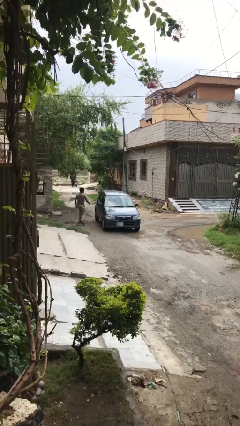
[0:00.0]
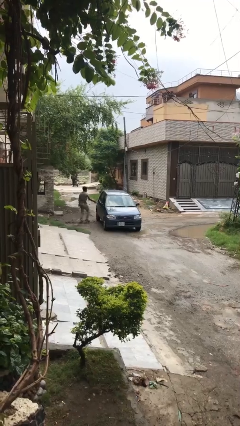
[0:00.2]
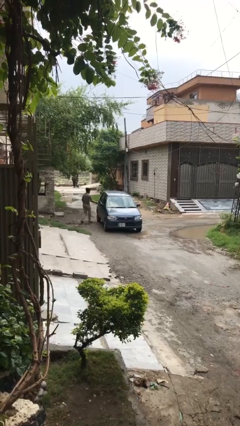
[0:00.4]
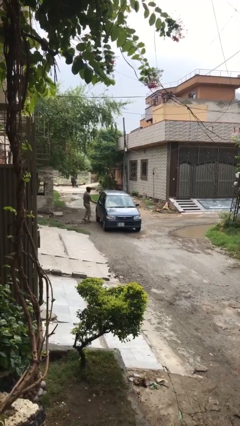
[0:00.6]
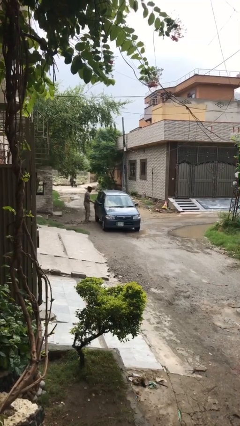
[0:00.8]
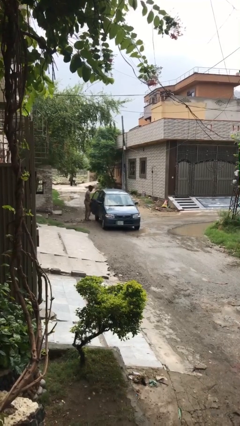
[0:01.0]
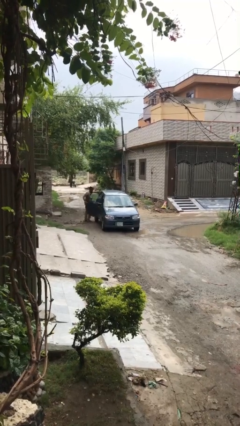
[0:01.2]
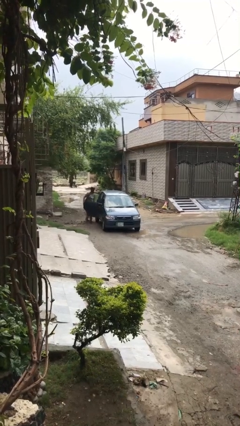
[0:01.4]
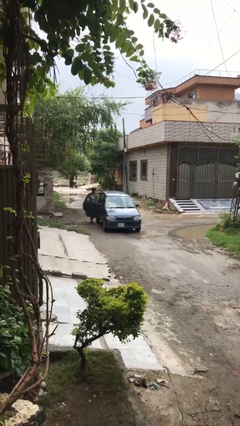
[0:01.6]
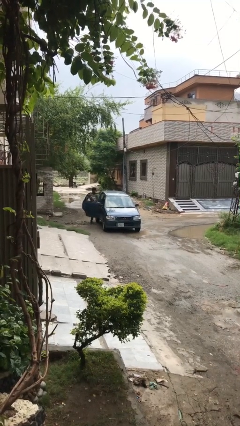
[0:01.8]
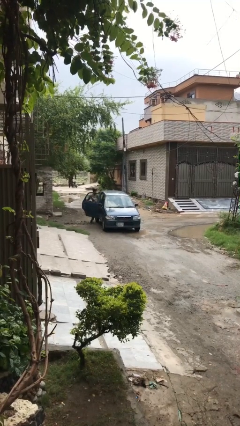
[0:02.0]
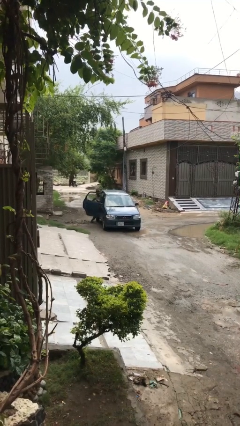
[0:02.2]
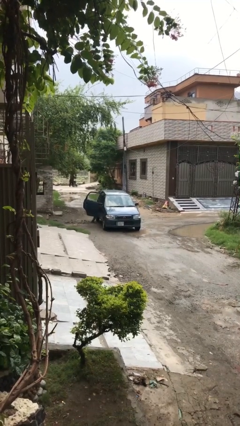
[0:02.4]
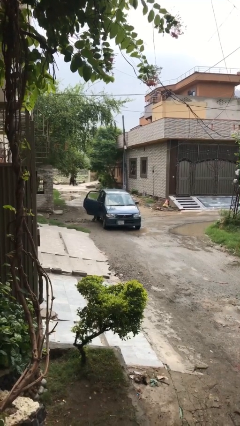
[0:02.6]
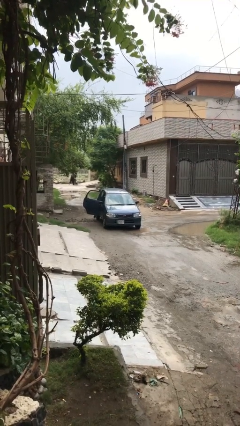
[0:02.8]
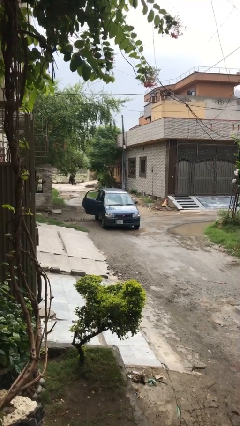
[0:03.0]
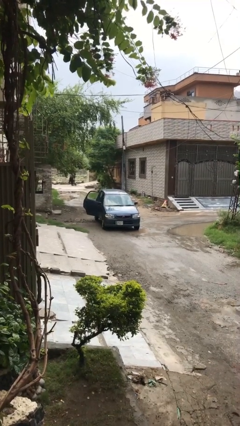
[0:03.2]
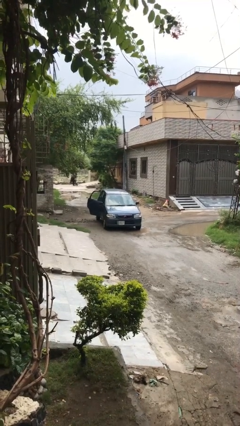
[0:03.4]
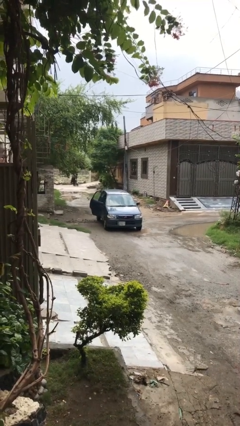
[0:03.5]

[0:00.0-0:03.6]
car picks up person

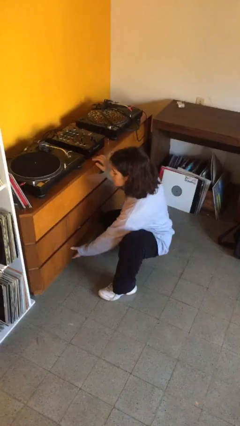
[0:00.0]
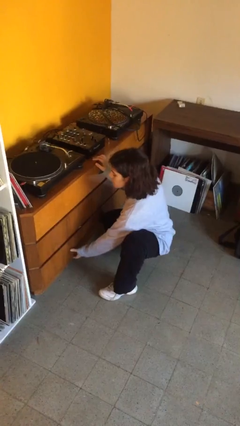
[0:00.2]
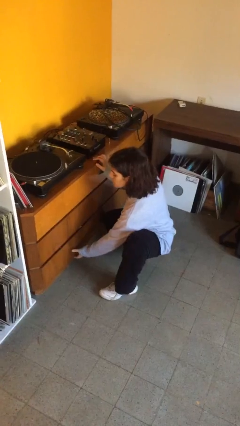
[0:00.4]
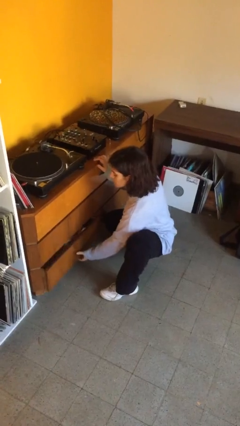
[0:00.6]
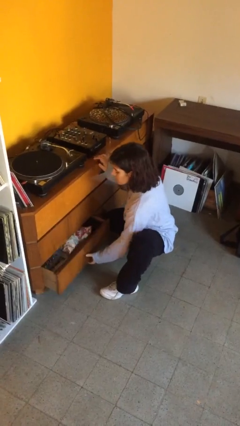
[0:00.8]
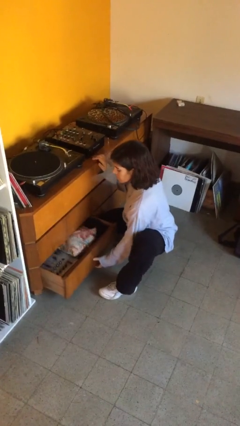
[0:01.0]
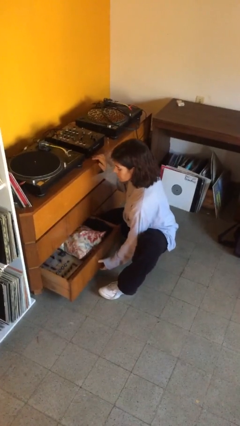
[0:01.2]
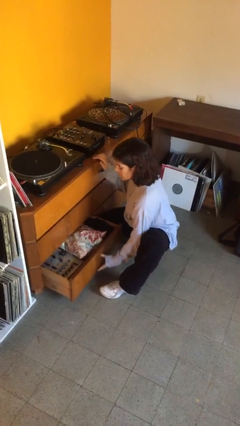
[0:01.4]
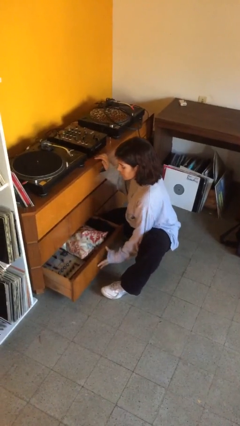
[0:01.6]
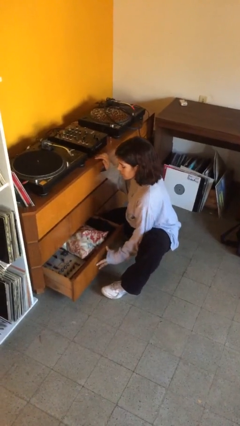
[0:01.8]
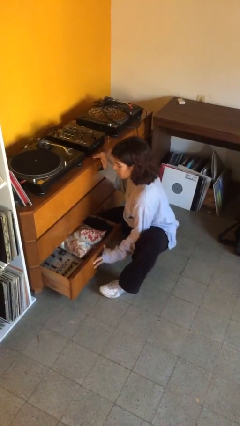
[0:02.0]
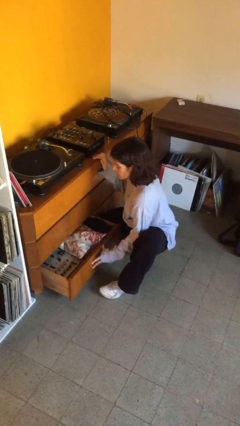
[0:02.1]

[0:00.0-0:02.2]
person opens dresser drawer

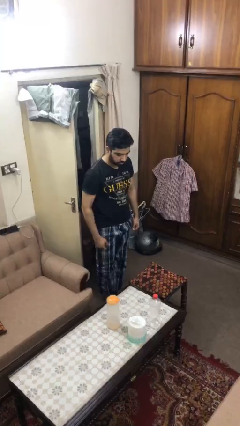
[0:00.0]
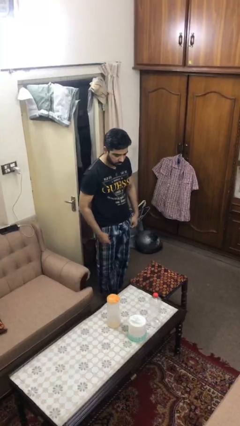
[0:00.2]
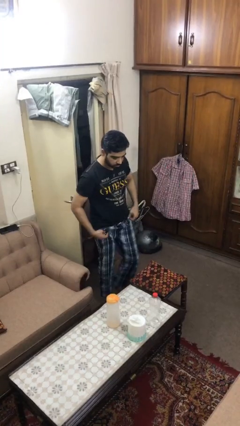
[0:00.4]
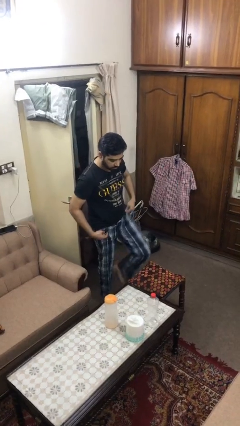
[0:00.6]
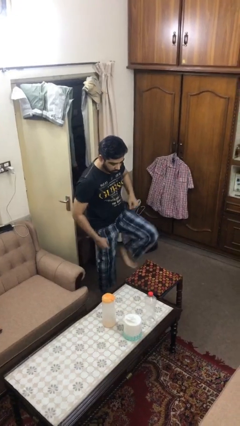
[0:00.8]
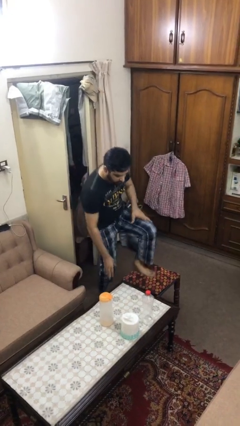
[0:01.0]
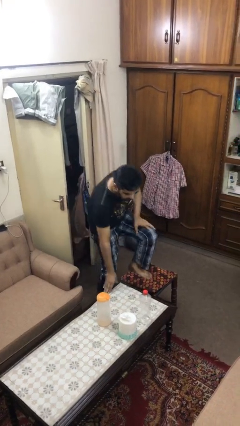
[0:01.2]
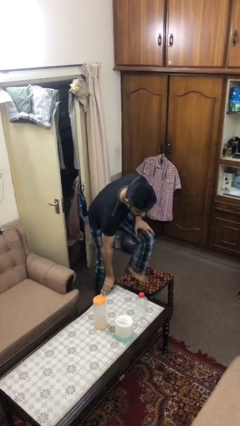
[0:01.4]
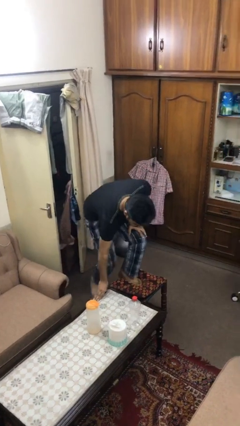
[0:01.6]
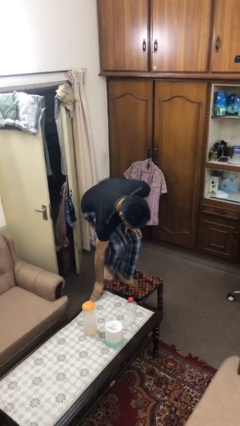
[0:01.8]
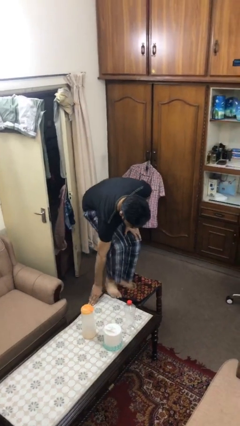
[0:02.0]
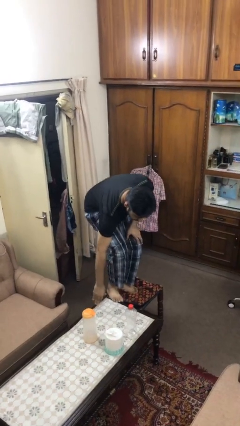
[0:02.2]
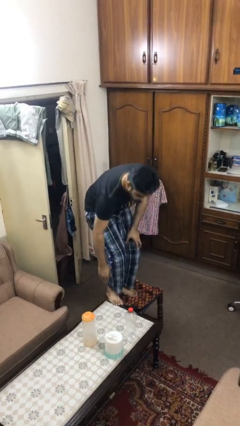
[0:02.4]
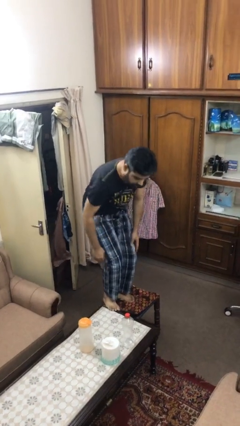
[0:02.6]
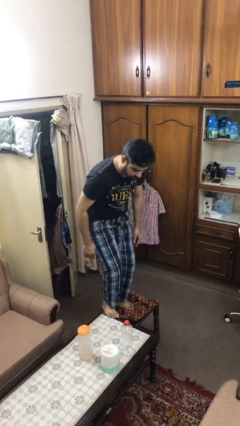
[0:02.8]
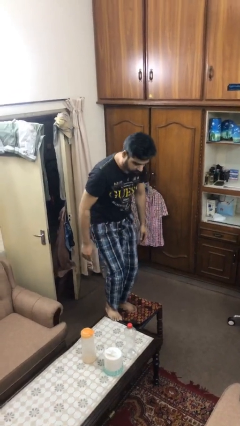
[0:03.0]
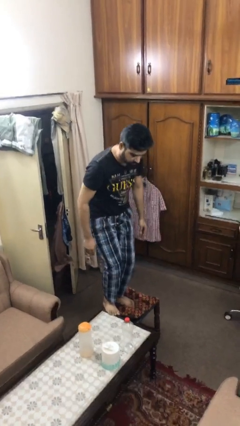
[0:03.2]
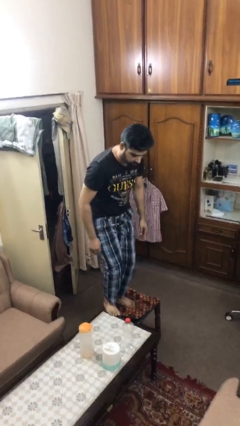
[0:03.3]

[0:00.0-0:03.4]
person climbs on table

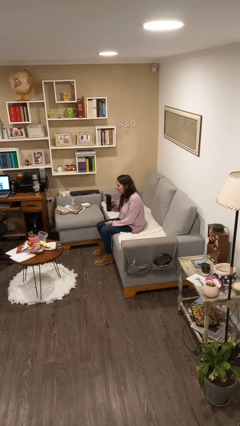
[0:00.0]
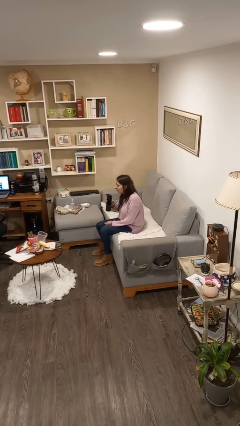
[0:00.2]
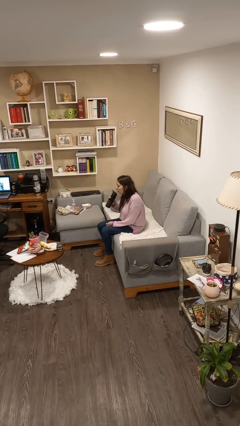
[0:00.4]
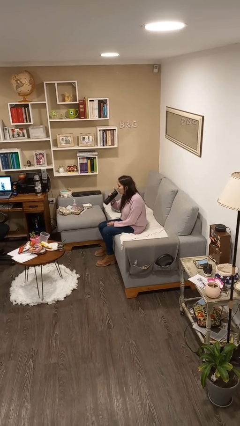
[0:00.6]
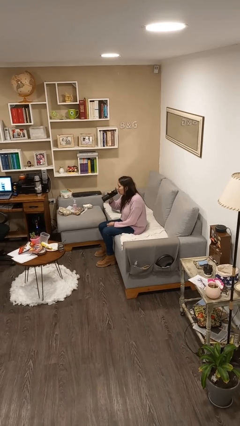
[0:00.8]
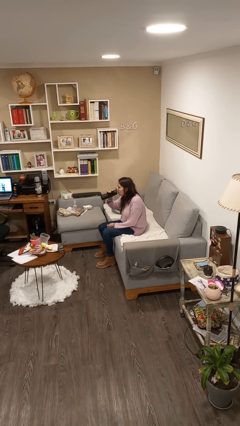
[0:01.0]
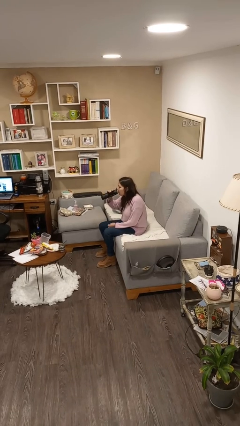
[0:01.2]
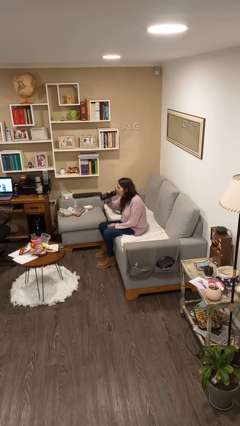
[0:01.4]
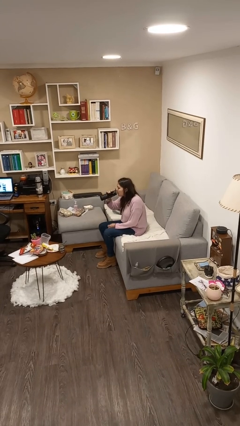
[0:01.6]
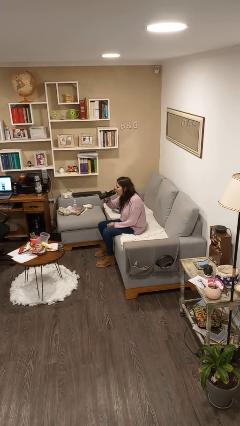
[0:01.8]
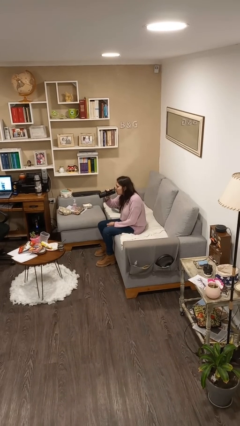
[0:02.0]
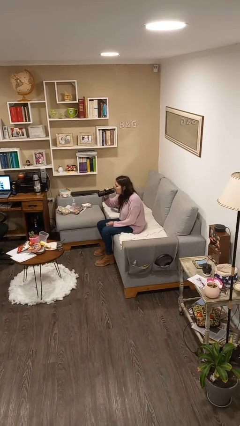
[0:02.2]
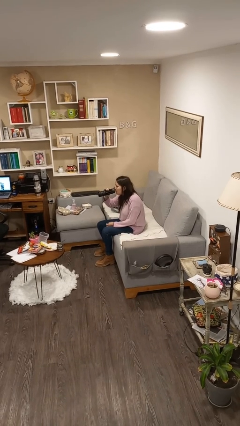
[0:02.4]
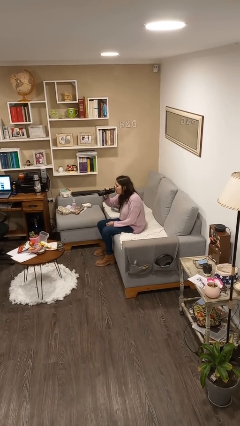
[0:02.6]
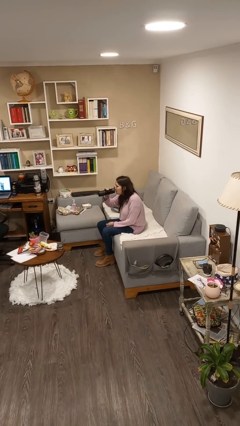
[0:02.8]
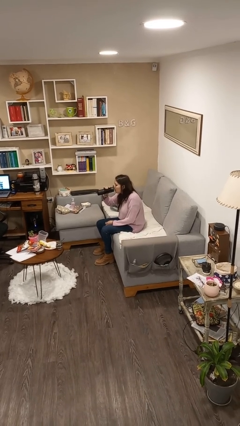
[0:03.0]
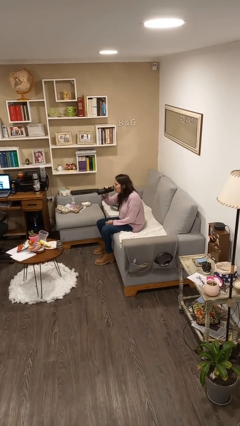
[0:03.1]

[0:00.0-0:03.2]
person drinks from bottle

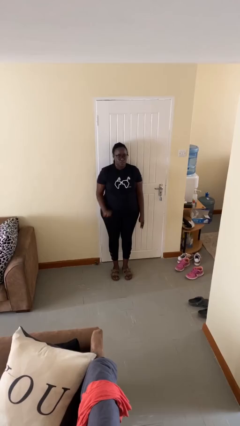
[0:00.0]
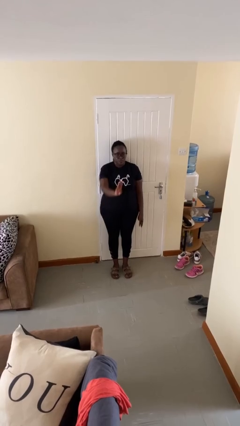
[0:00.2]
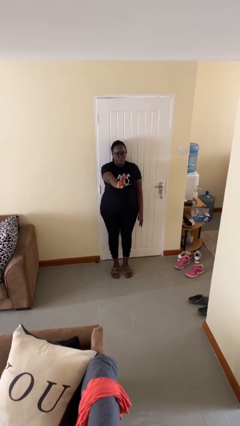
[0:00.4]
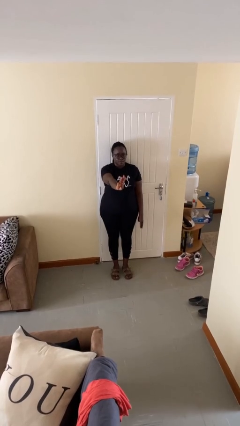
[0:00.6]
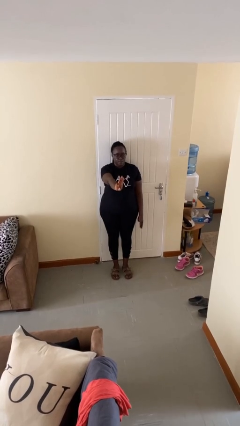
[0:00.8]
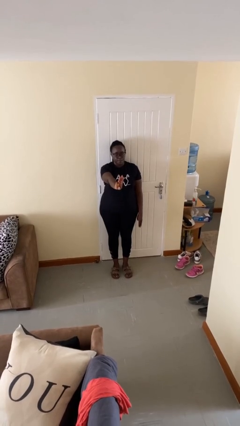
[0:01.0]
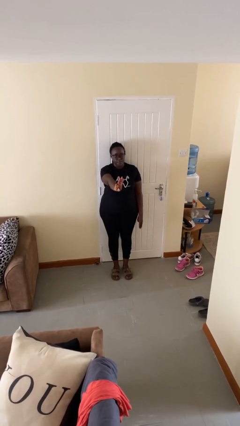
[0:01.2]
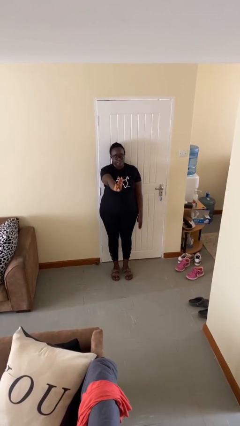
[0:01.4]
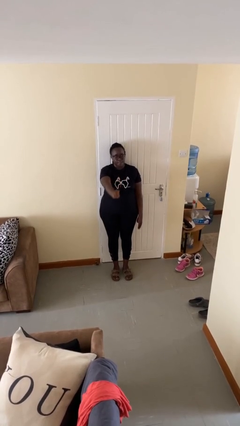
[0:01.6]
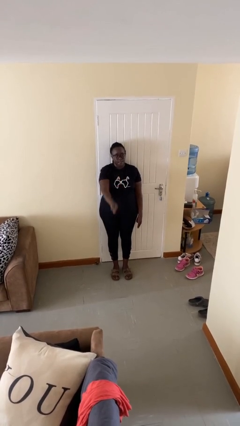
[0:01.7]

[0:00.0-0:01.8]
person gestures number three

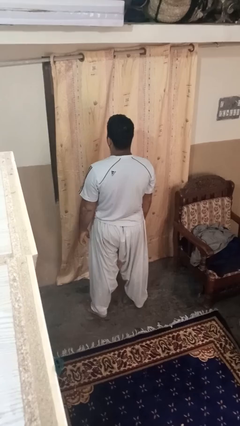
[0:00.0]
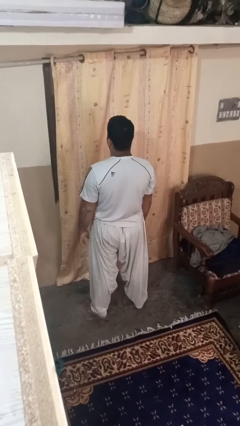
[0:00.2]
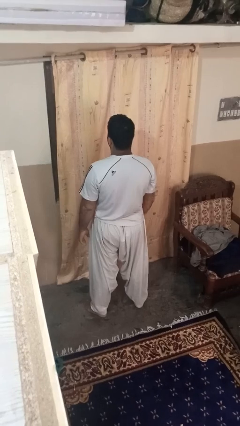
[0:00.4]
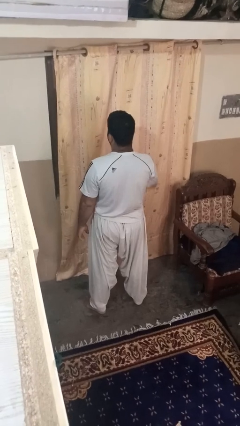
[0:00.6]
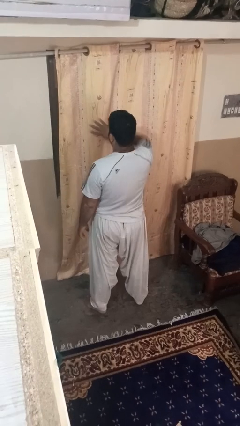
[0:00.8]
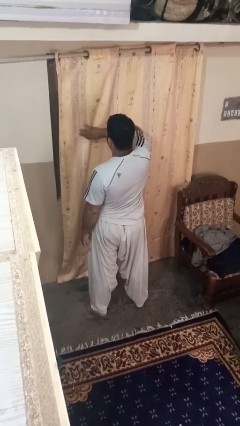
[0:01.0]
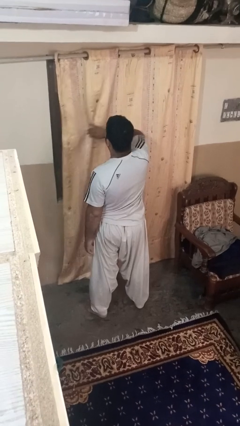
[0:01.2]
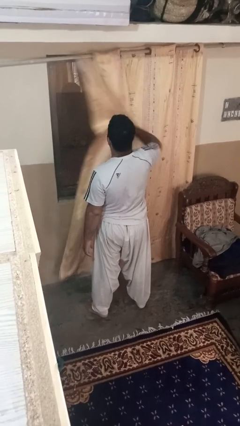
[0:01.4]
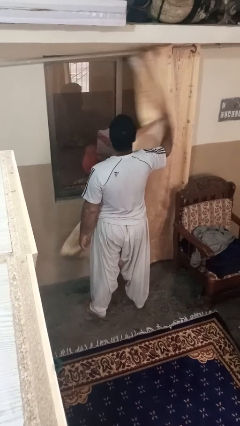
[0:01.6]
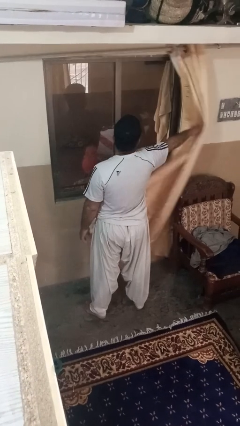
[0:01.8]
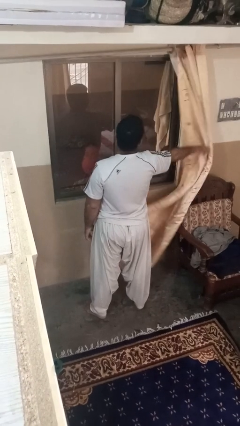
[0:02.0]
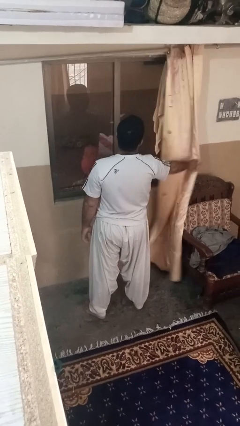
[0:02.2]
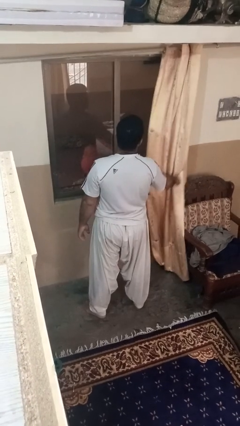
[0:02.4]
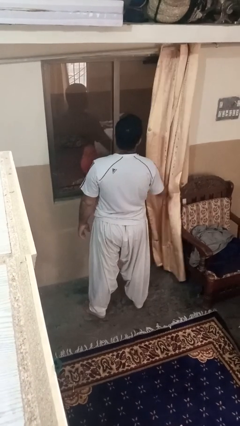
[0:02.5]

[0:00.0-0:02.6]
person opens curtains

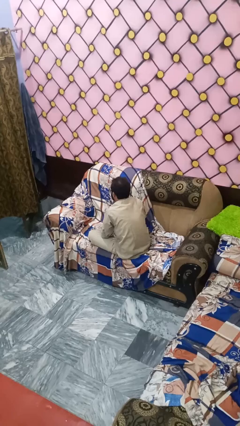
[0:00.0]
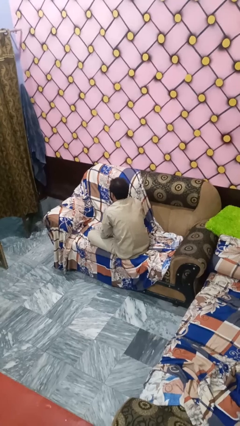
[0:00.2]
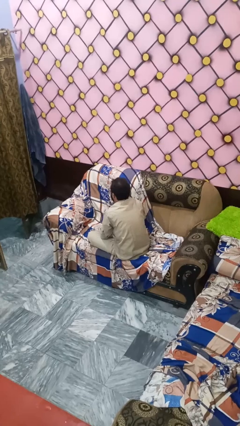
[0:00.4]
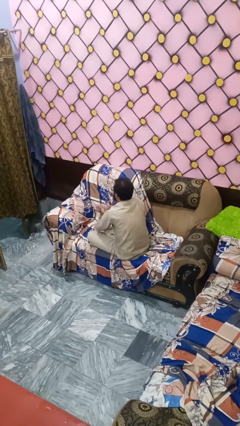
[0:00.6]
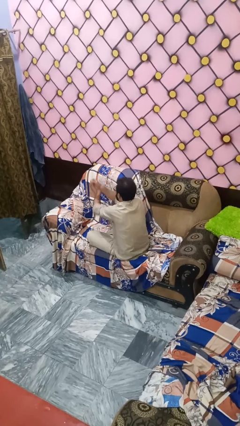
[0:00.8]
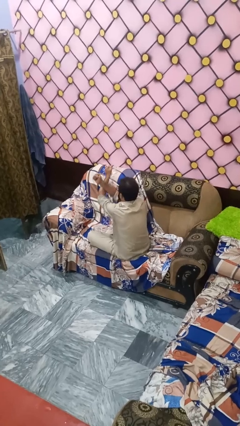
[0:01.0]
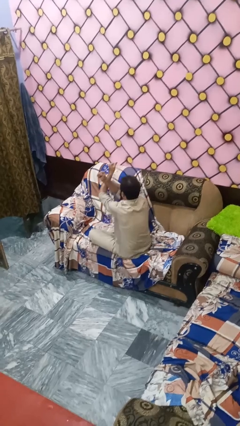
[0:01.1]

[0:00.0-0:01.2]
person gestures arms x
